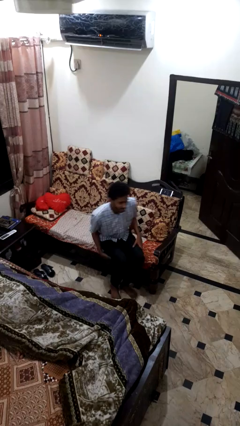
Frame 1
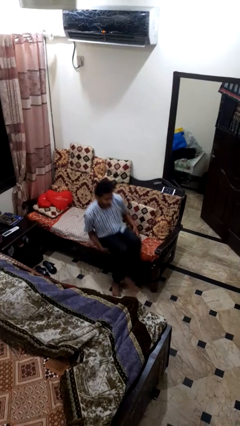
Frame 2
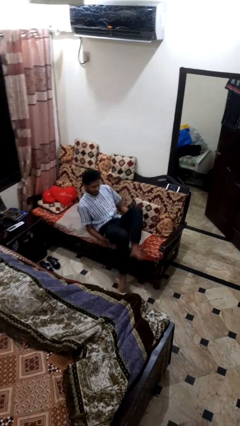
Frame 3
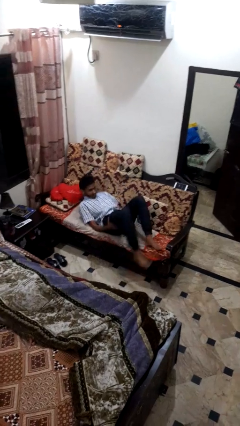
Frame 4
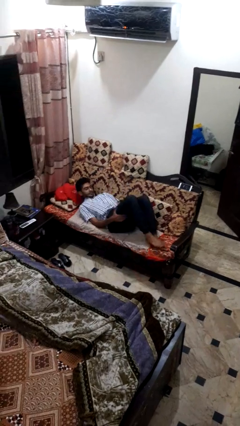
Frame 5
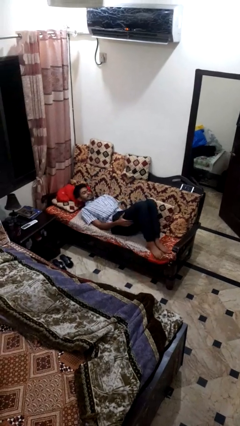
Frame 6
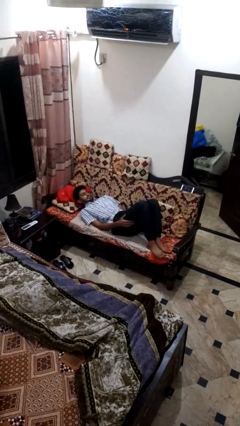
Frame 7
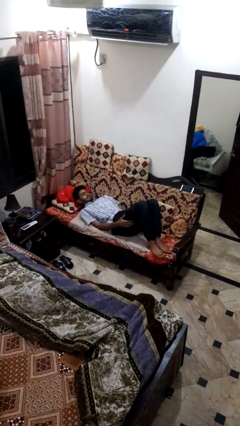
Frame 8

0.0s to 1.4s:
person lies down on couch

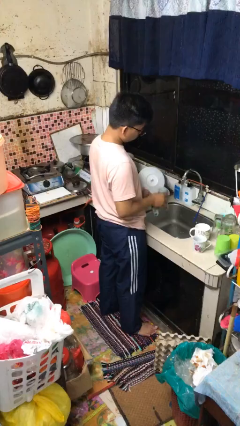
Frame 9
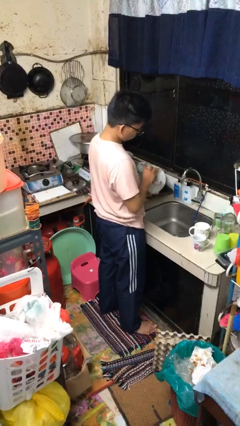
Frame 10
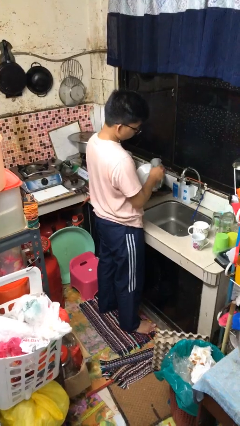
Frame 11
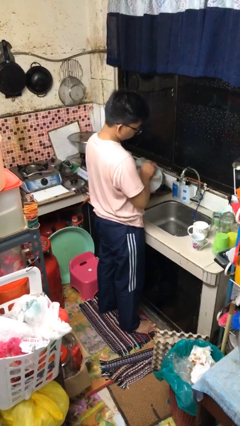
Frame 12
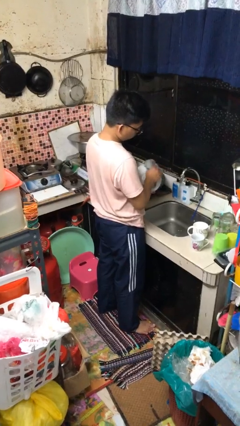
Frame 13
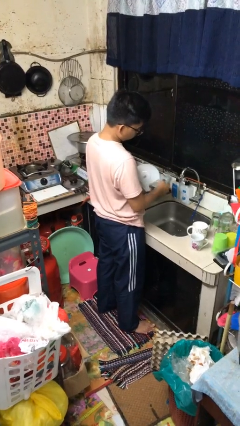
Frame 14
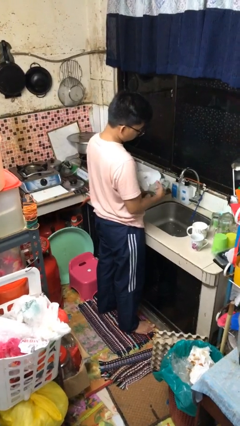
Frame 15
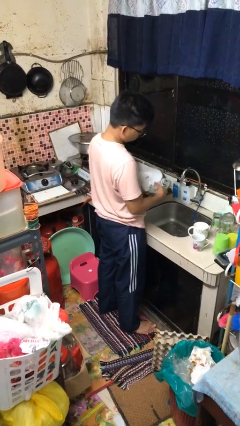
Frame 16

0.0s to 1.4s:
person dries dish

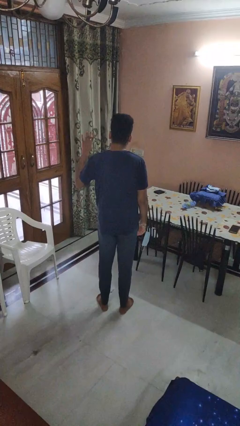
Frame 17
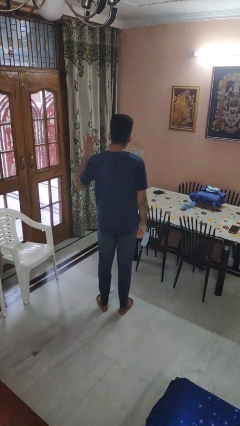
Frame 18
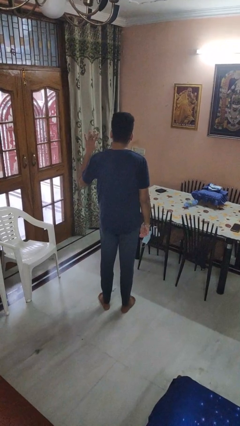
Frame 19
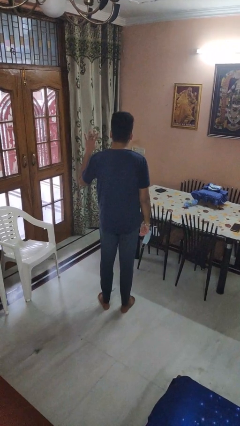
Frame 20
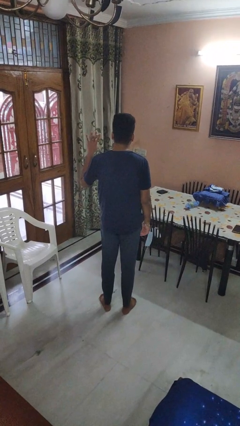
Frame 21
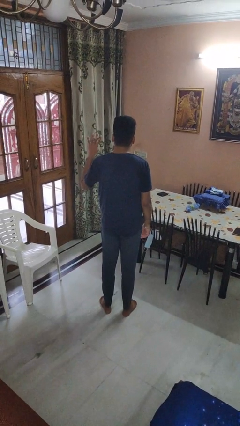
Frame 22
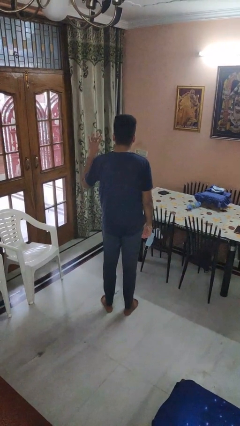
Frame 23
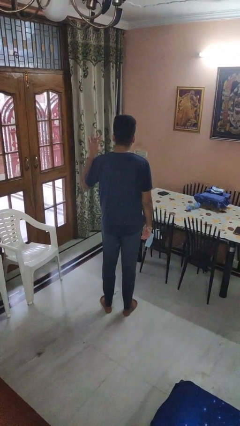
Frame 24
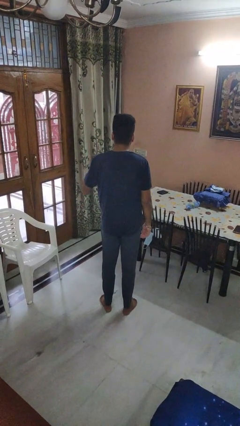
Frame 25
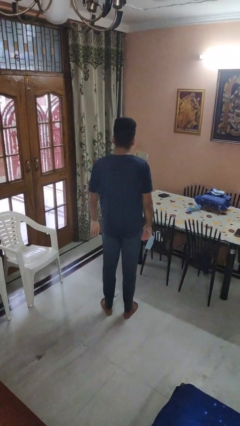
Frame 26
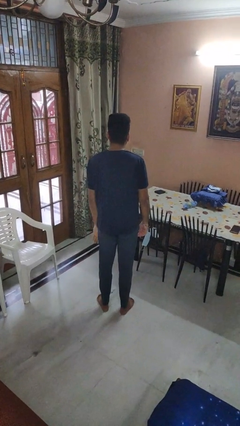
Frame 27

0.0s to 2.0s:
person gestures number four

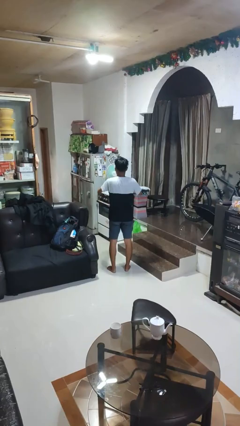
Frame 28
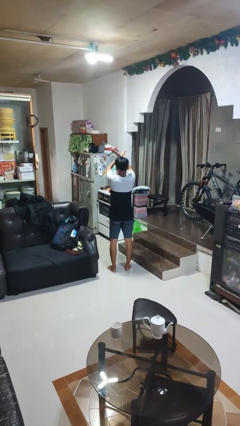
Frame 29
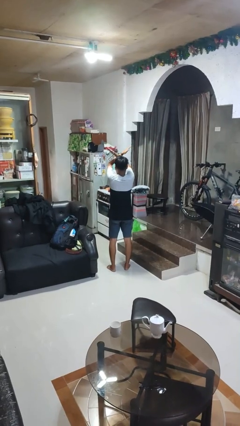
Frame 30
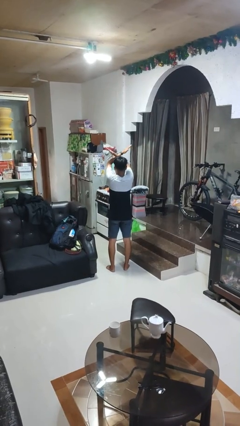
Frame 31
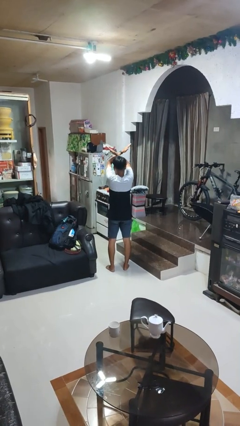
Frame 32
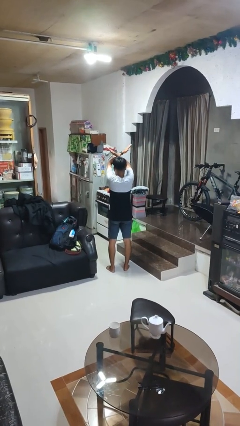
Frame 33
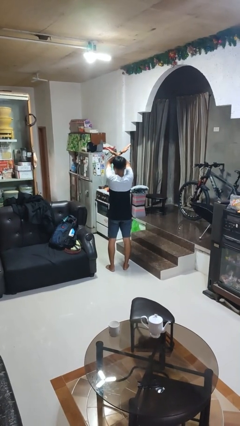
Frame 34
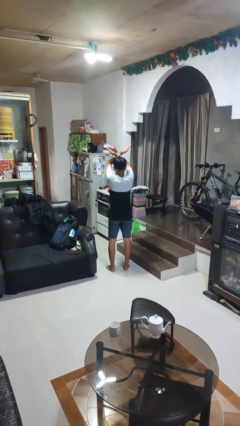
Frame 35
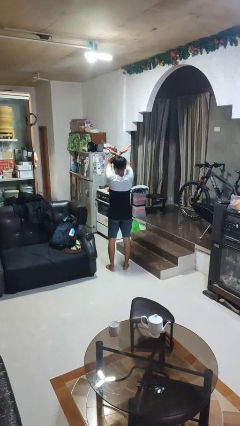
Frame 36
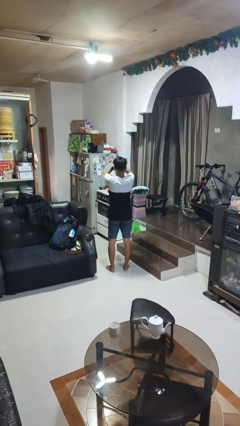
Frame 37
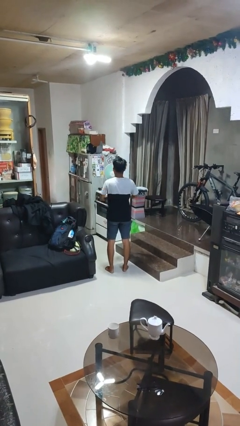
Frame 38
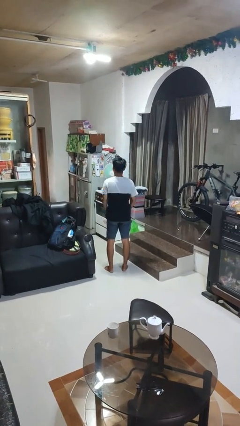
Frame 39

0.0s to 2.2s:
person gestures arms x

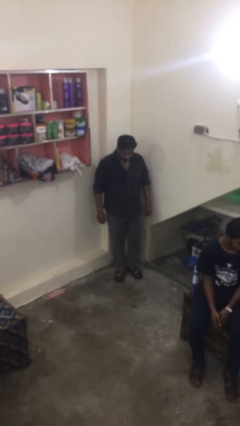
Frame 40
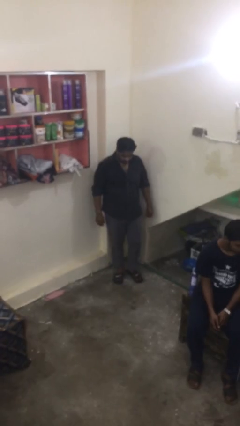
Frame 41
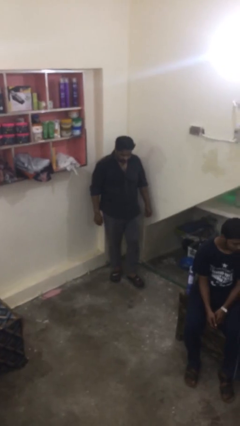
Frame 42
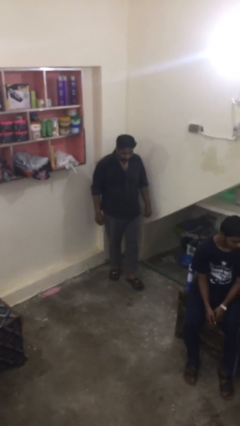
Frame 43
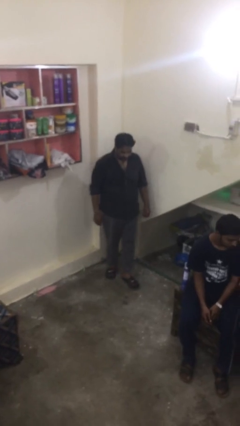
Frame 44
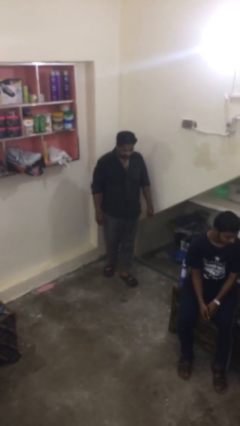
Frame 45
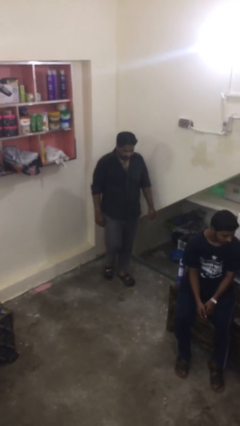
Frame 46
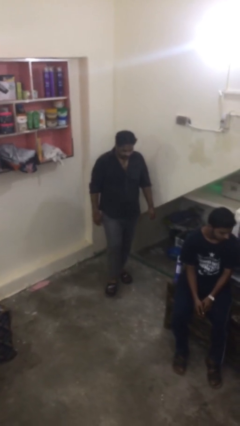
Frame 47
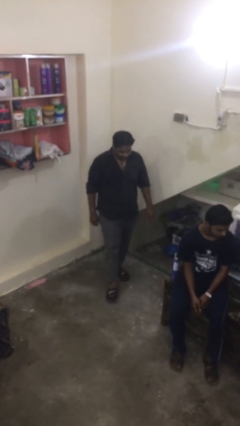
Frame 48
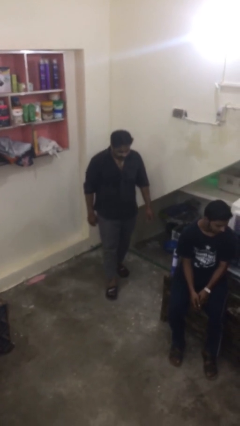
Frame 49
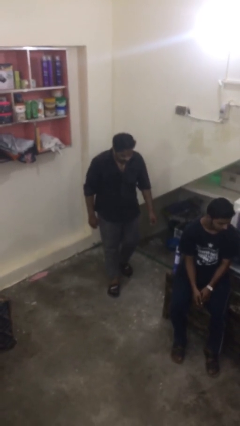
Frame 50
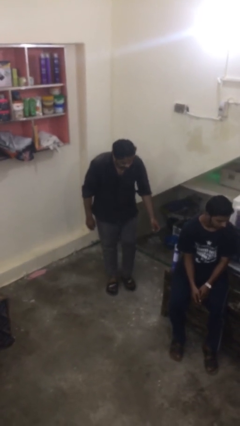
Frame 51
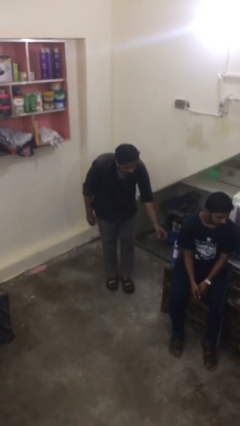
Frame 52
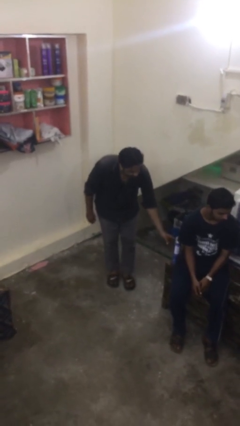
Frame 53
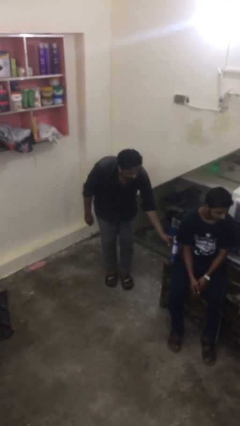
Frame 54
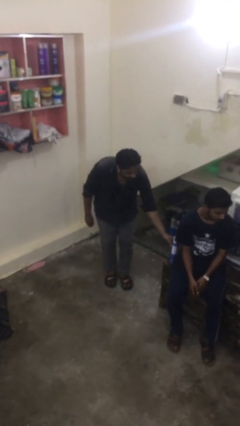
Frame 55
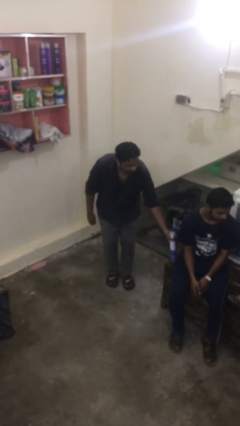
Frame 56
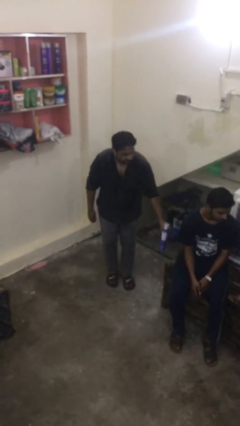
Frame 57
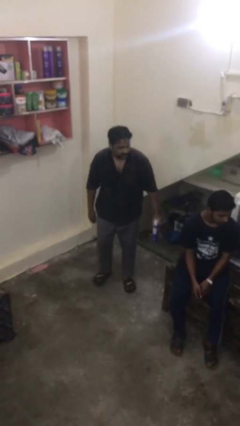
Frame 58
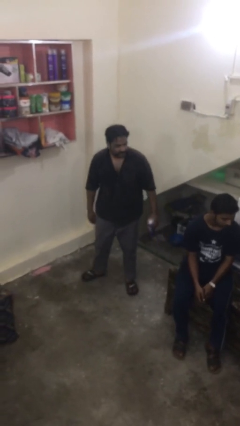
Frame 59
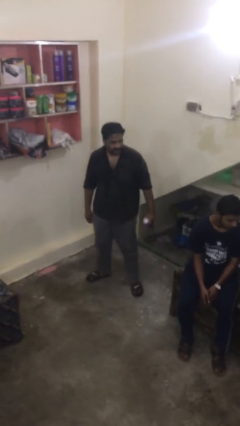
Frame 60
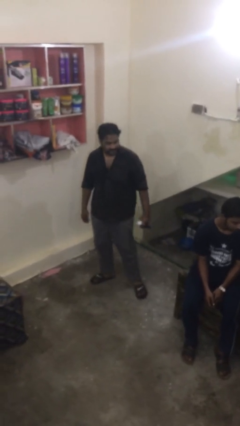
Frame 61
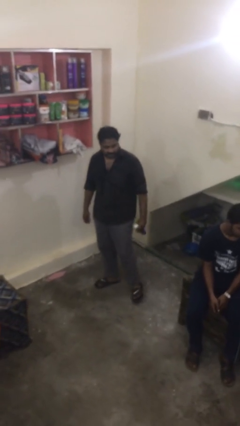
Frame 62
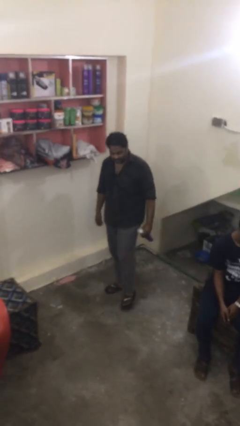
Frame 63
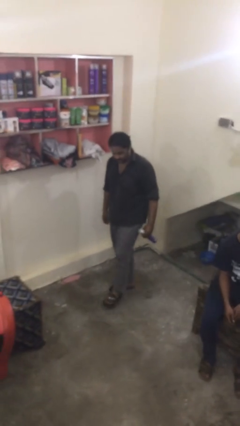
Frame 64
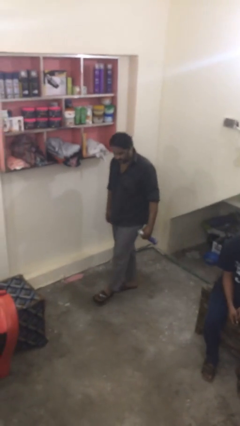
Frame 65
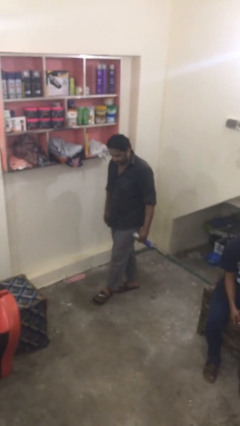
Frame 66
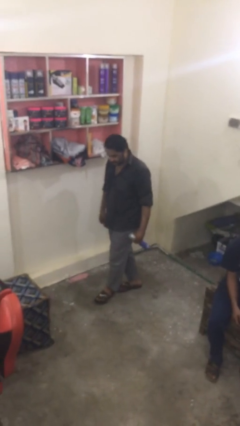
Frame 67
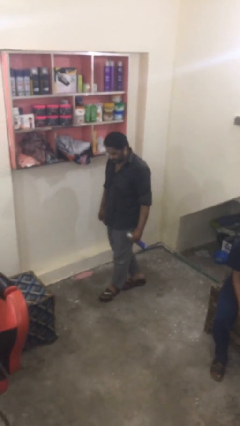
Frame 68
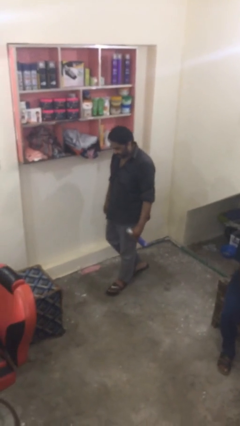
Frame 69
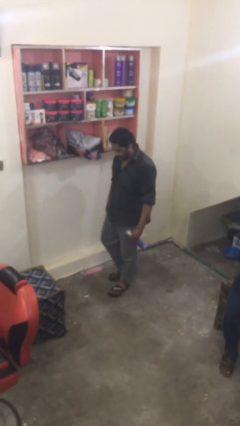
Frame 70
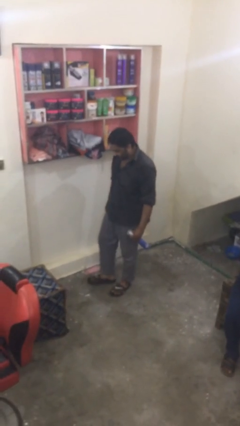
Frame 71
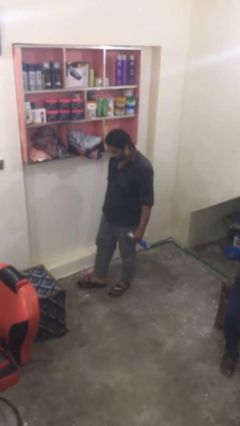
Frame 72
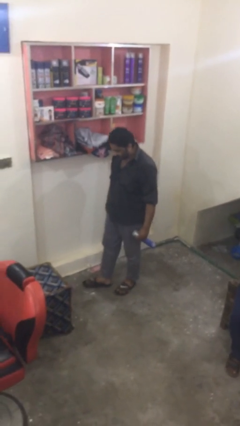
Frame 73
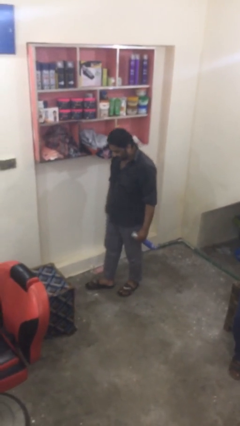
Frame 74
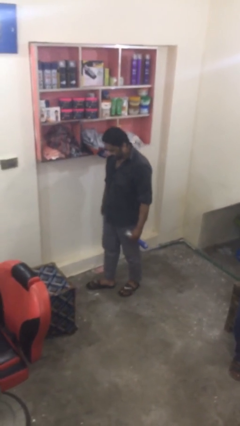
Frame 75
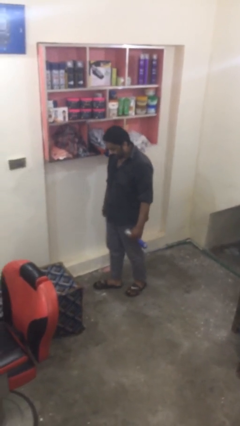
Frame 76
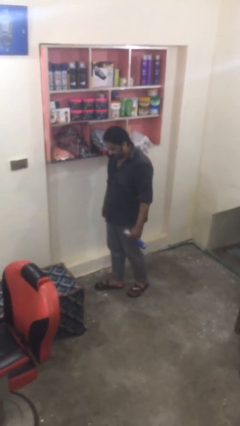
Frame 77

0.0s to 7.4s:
person steals object from person

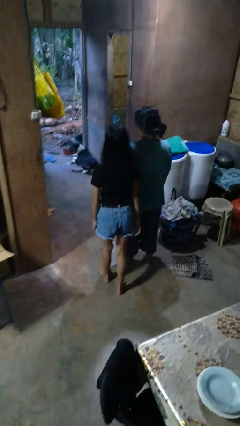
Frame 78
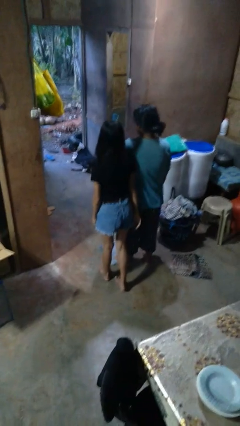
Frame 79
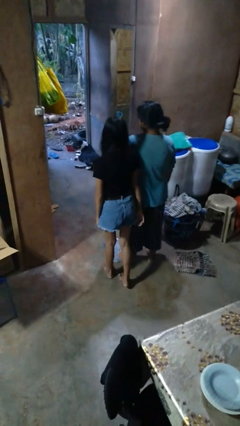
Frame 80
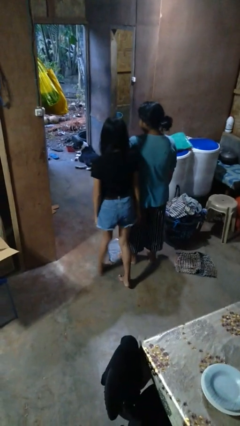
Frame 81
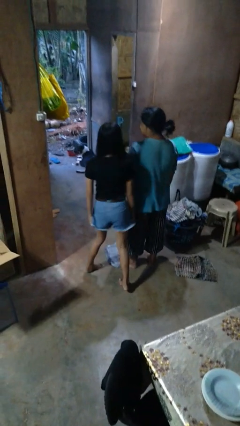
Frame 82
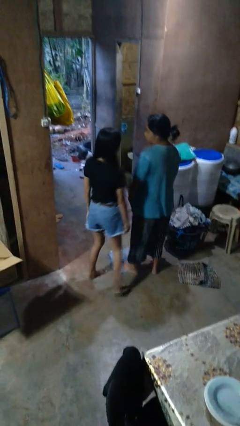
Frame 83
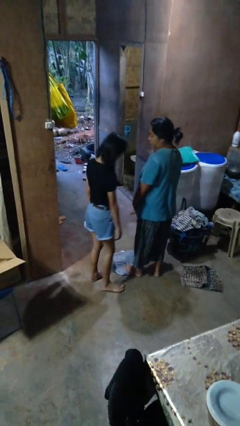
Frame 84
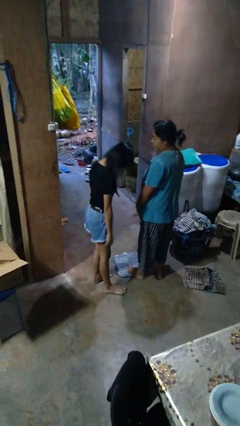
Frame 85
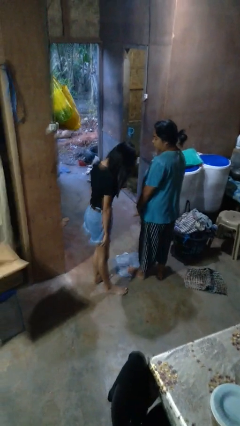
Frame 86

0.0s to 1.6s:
person bumps into person

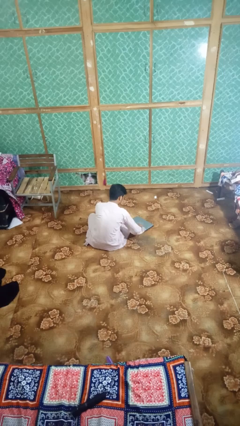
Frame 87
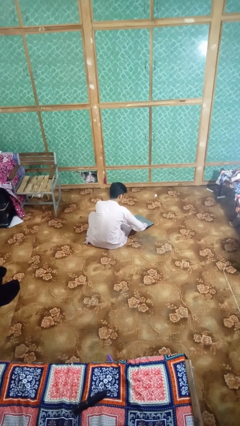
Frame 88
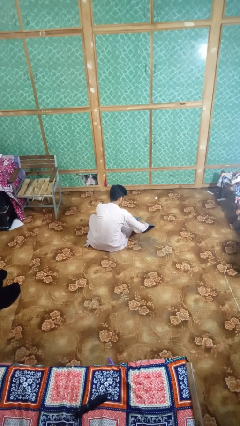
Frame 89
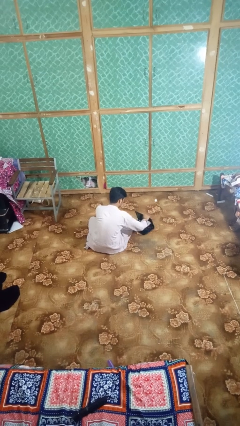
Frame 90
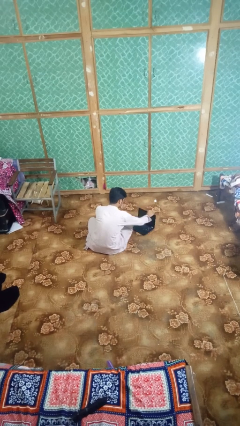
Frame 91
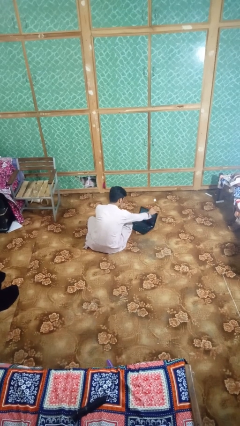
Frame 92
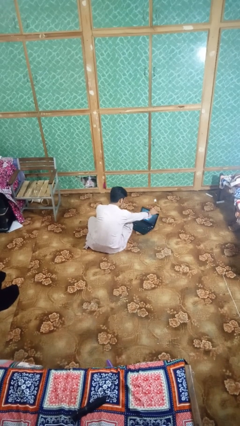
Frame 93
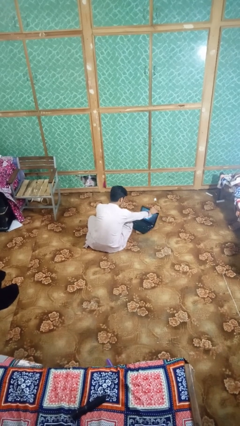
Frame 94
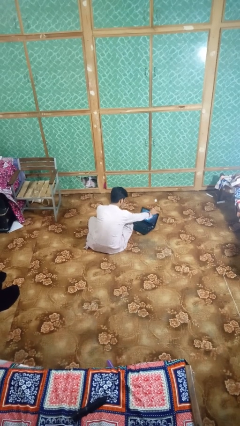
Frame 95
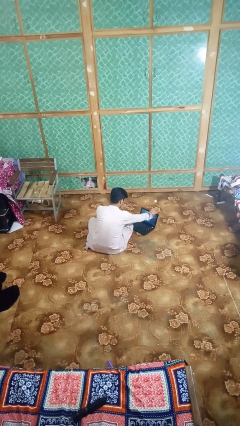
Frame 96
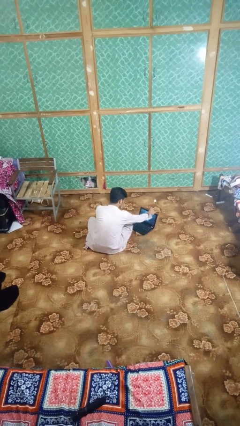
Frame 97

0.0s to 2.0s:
person opens laptop
